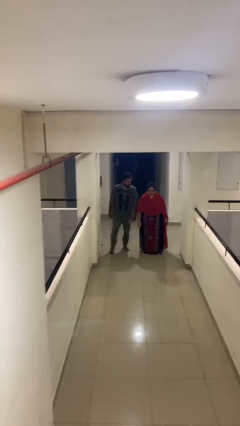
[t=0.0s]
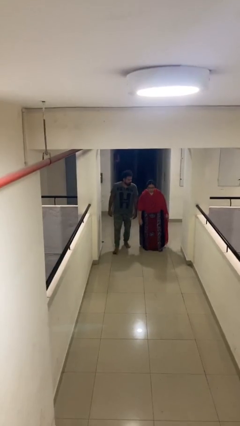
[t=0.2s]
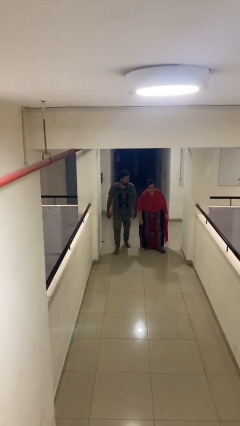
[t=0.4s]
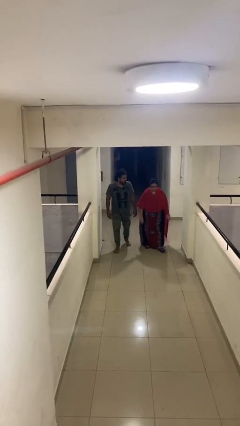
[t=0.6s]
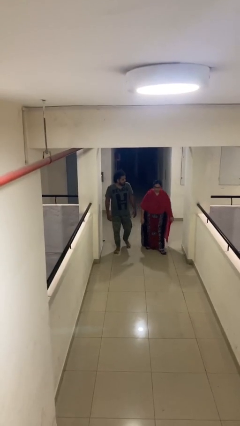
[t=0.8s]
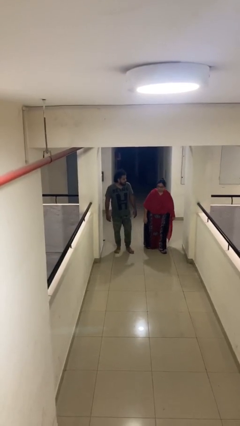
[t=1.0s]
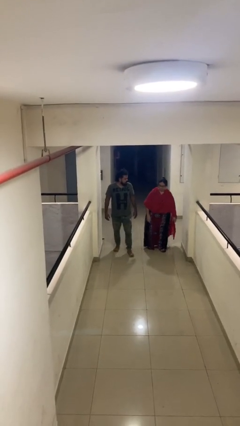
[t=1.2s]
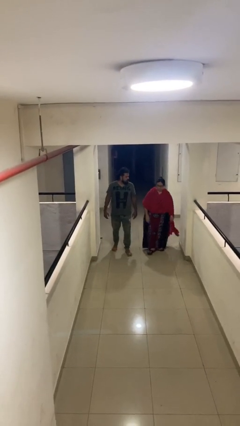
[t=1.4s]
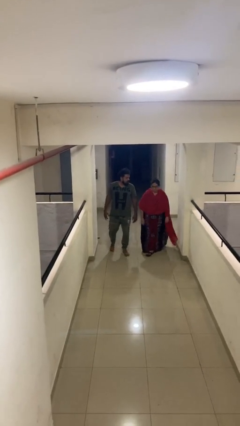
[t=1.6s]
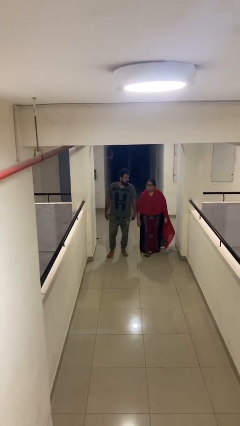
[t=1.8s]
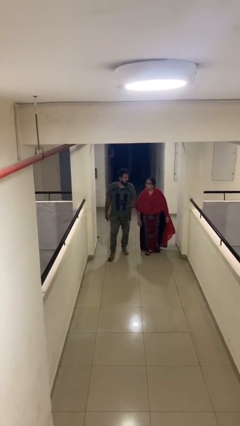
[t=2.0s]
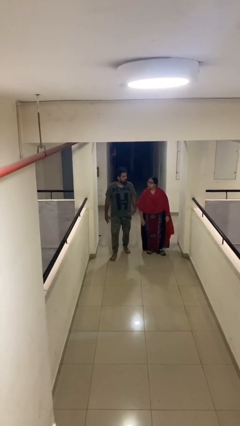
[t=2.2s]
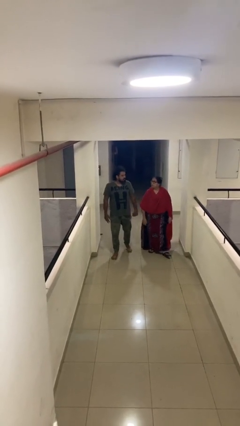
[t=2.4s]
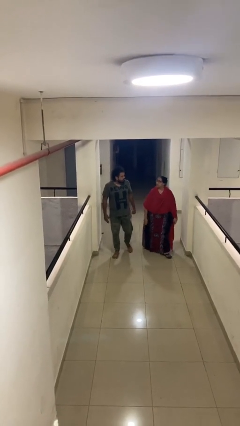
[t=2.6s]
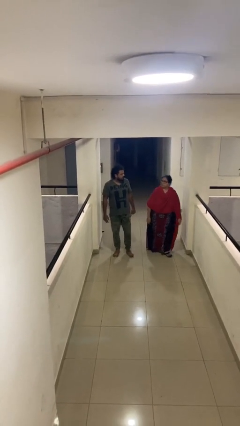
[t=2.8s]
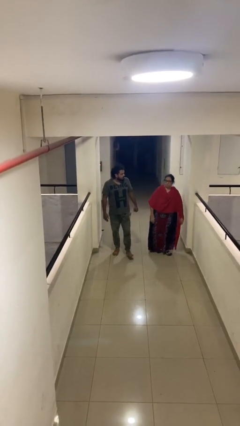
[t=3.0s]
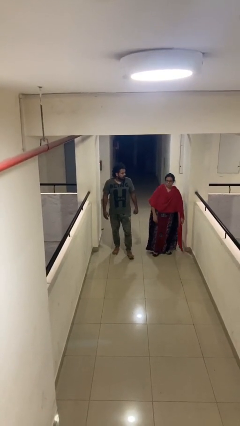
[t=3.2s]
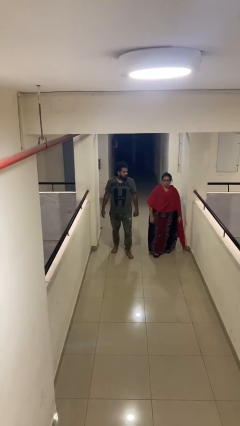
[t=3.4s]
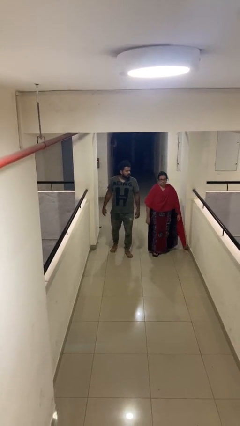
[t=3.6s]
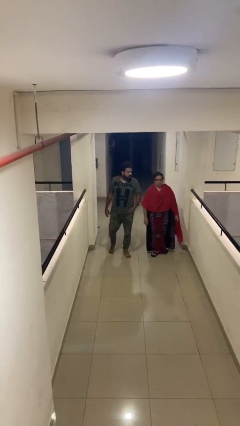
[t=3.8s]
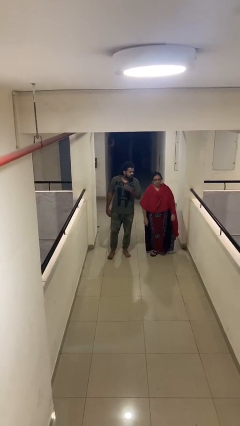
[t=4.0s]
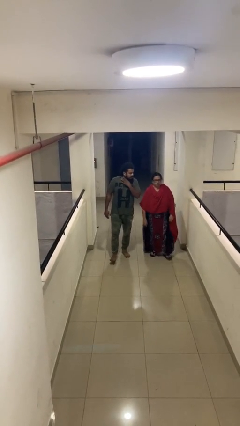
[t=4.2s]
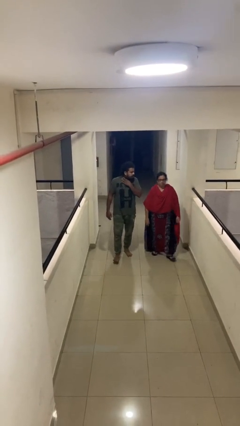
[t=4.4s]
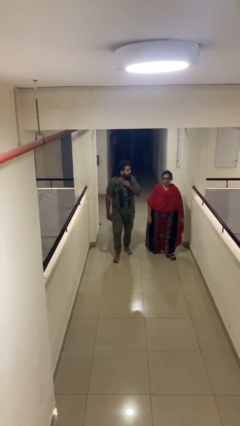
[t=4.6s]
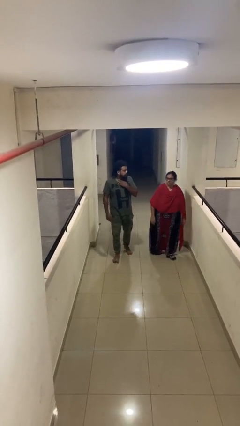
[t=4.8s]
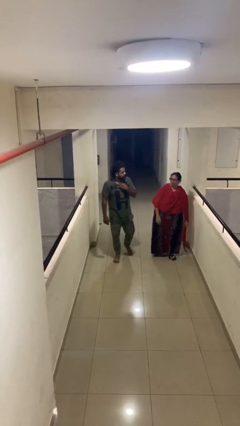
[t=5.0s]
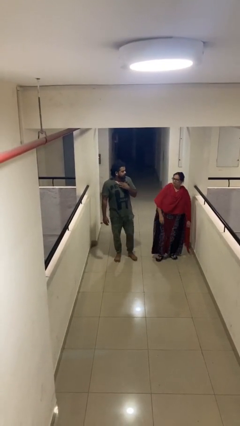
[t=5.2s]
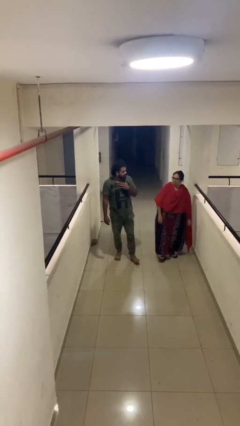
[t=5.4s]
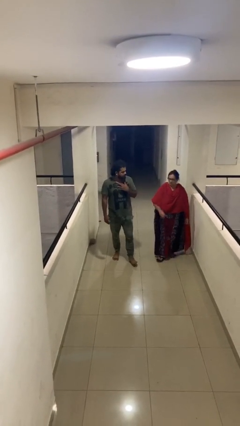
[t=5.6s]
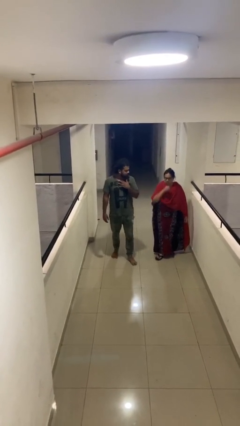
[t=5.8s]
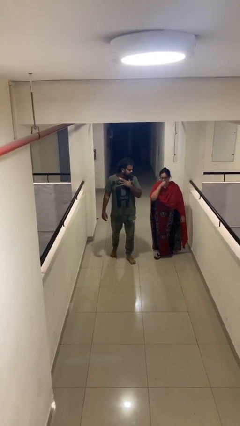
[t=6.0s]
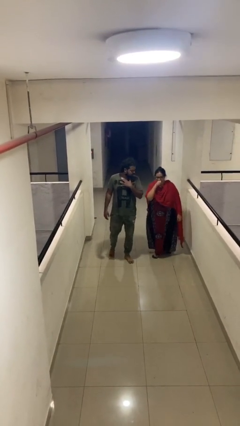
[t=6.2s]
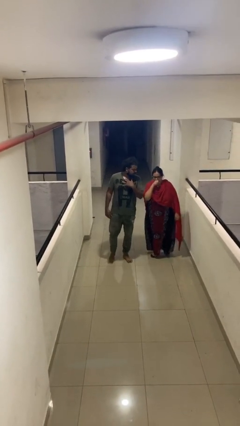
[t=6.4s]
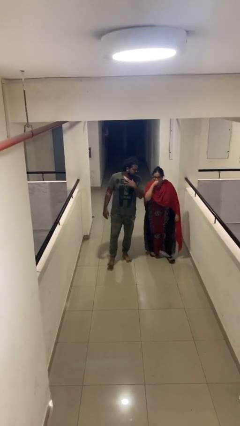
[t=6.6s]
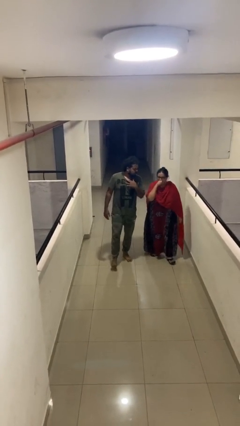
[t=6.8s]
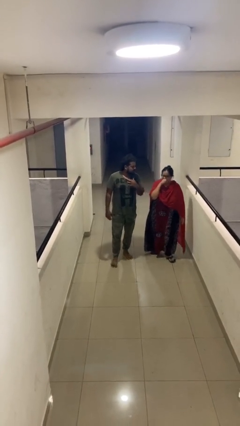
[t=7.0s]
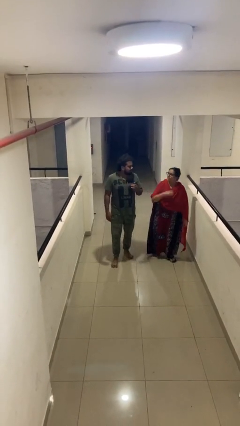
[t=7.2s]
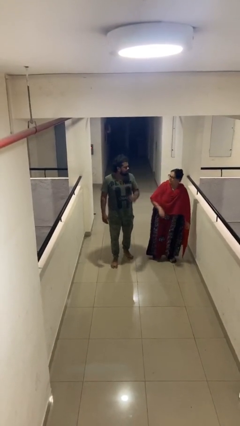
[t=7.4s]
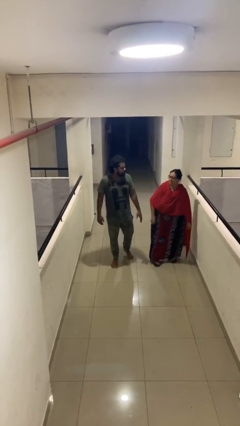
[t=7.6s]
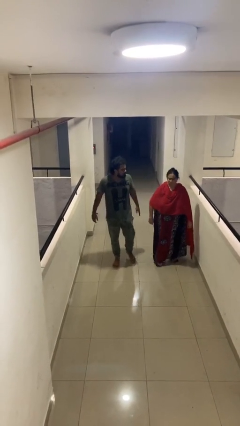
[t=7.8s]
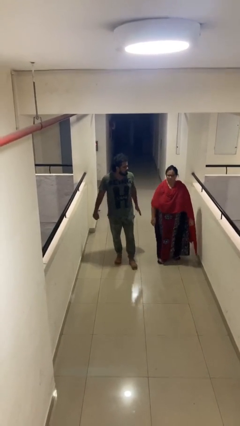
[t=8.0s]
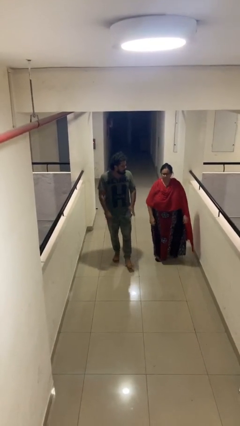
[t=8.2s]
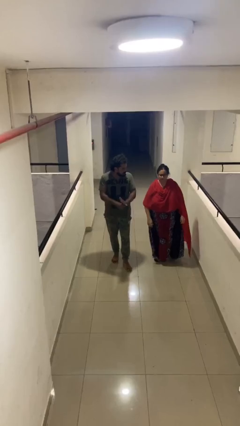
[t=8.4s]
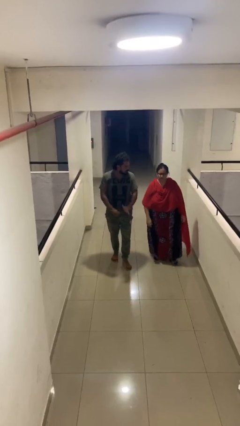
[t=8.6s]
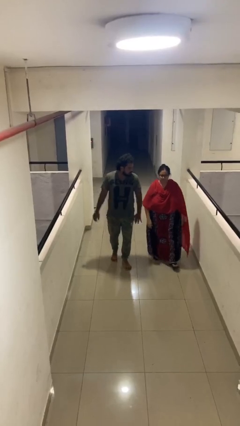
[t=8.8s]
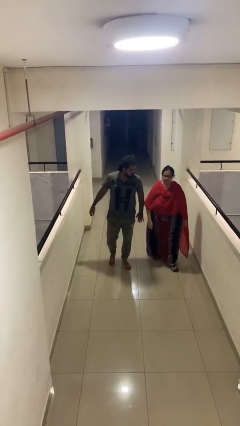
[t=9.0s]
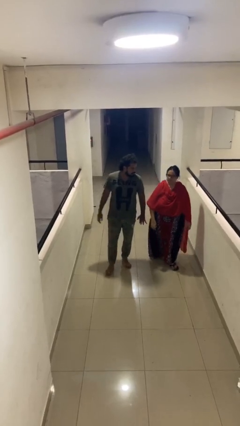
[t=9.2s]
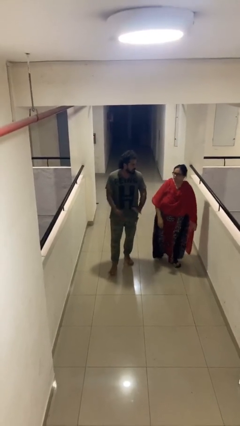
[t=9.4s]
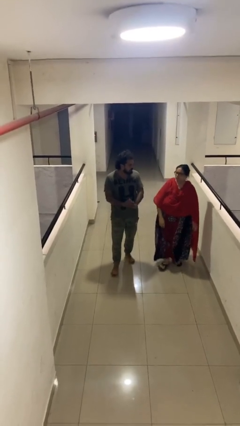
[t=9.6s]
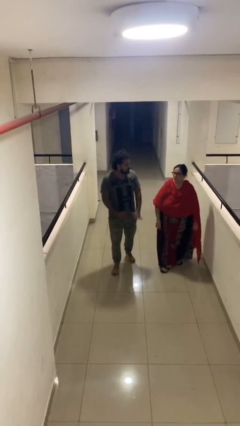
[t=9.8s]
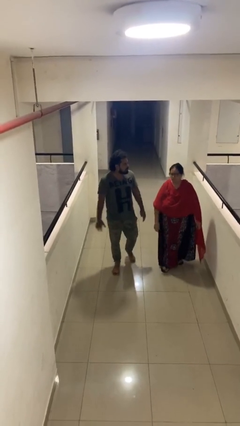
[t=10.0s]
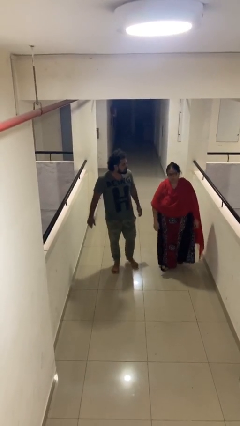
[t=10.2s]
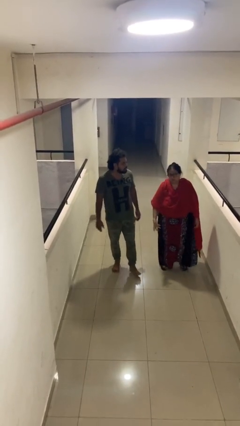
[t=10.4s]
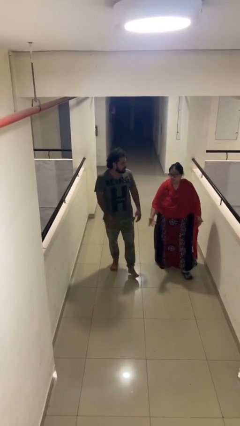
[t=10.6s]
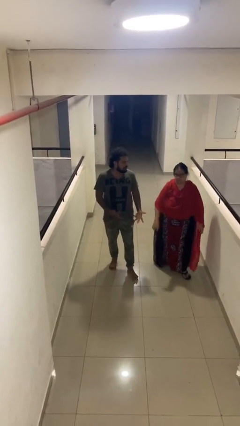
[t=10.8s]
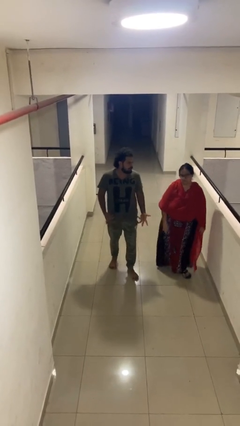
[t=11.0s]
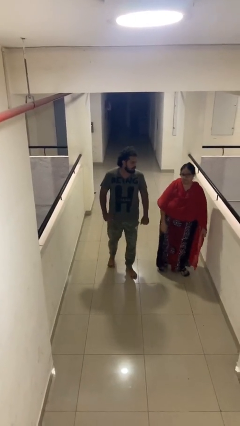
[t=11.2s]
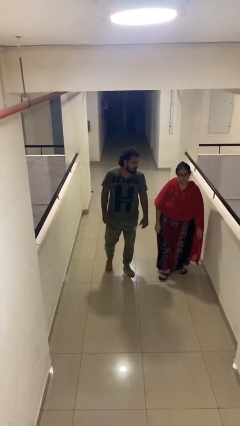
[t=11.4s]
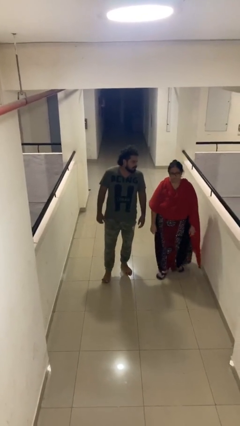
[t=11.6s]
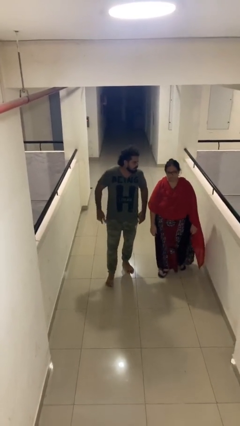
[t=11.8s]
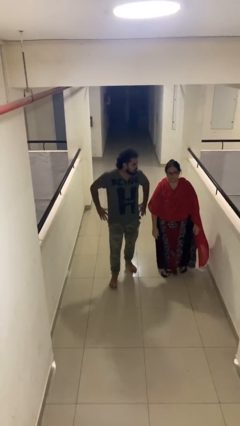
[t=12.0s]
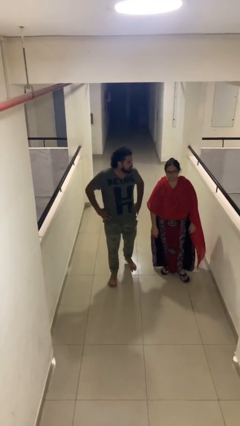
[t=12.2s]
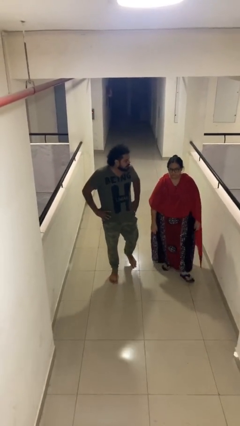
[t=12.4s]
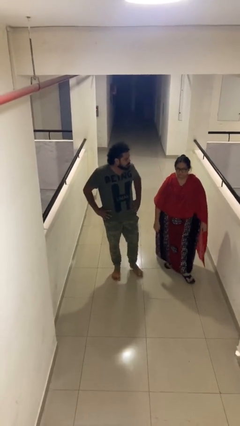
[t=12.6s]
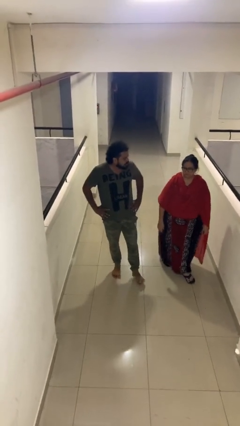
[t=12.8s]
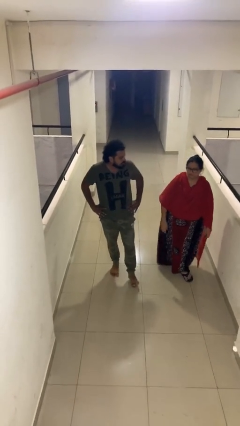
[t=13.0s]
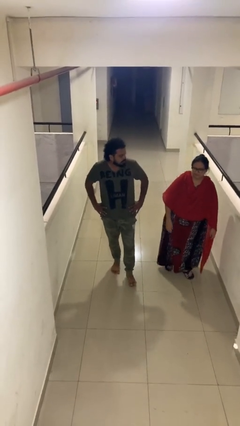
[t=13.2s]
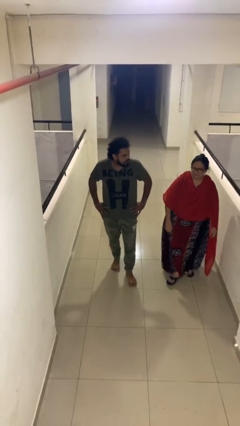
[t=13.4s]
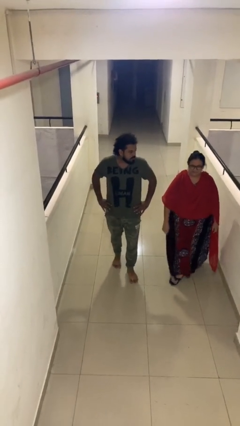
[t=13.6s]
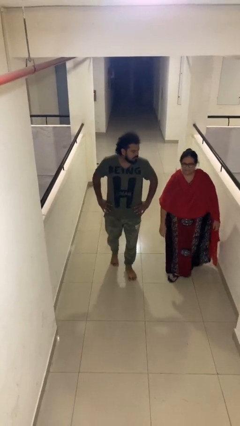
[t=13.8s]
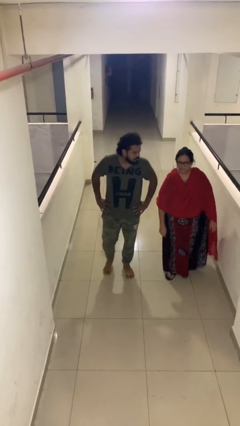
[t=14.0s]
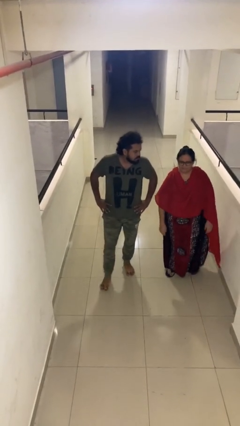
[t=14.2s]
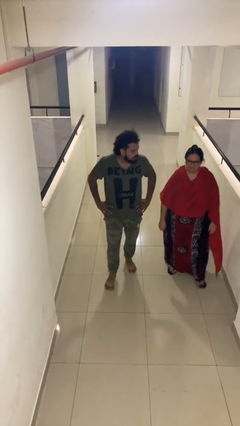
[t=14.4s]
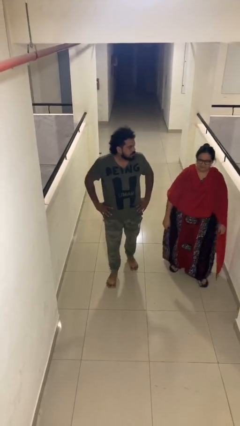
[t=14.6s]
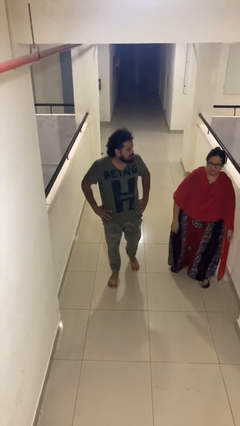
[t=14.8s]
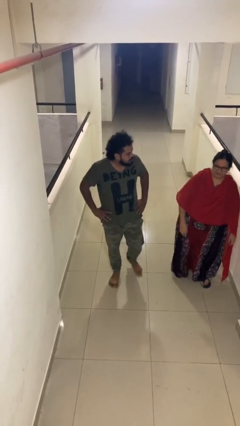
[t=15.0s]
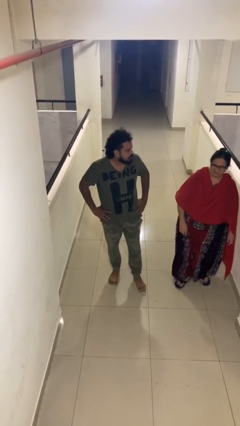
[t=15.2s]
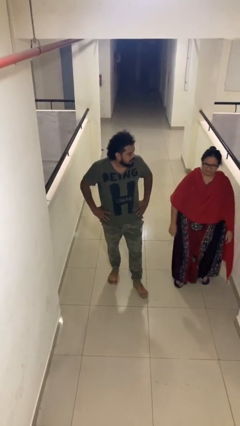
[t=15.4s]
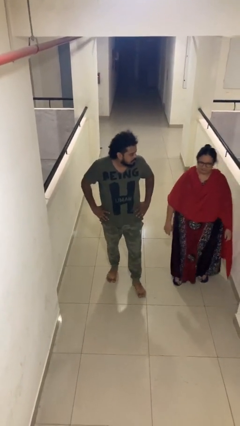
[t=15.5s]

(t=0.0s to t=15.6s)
person talks to person

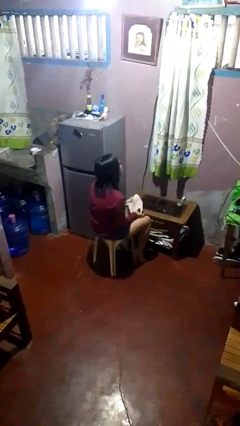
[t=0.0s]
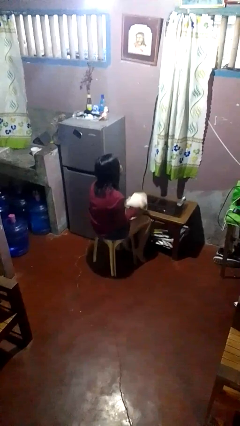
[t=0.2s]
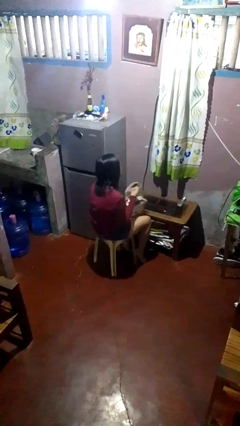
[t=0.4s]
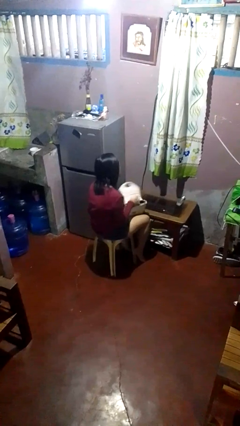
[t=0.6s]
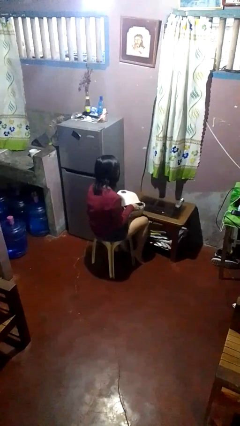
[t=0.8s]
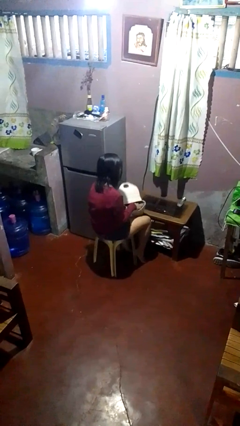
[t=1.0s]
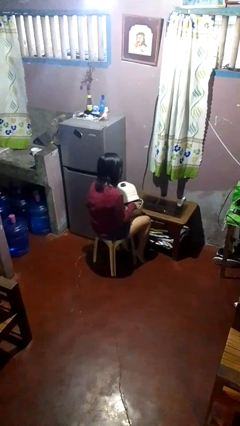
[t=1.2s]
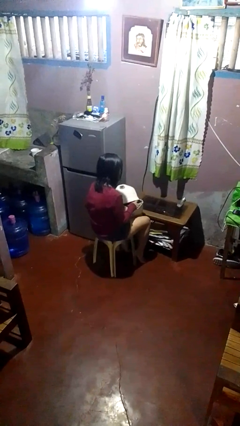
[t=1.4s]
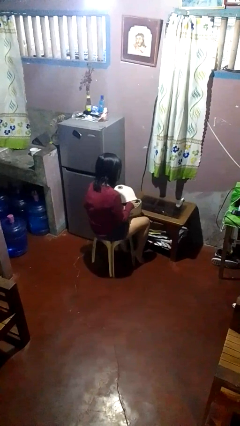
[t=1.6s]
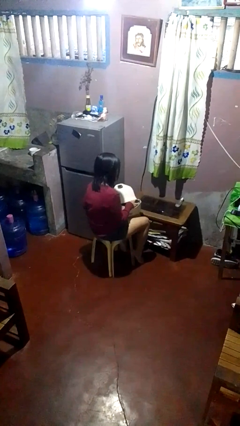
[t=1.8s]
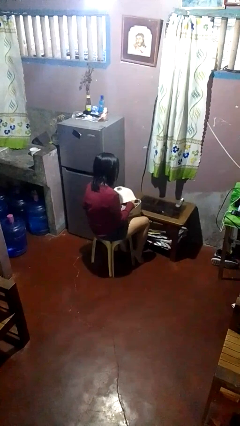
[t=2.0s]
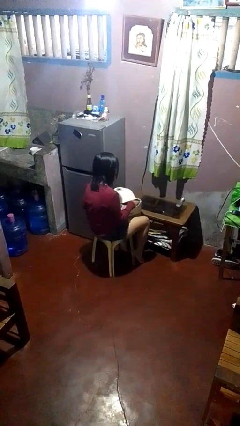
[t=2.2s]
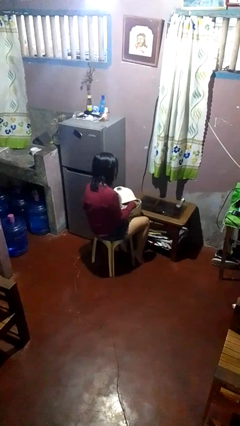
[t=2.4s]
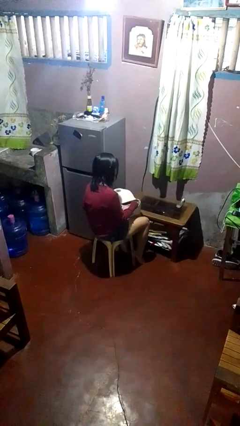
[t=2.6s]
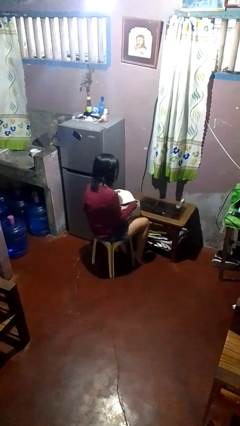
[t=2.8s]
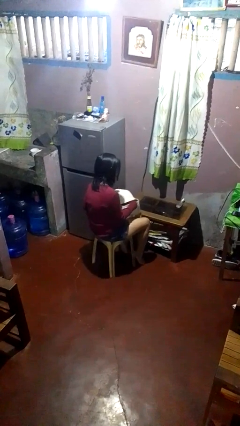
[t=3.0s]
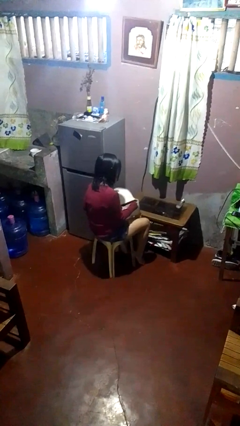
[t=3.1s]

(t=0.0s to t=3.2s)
person searches in purse
